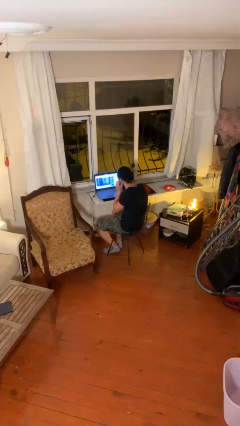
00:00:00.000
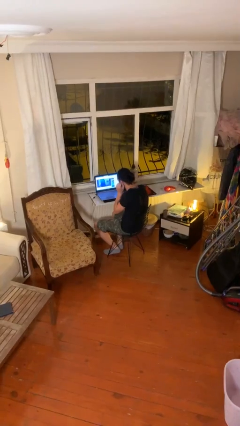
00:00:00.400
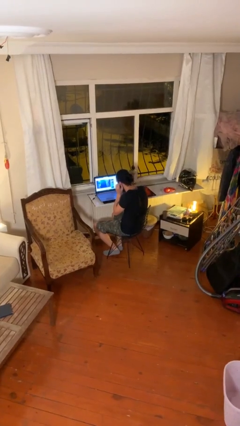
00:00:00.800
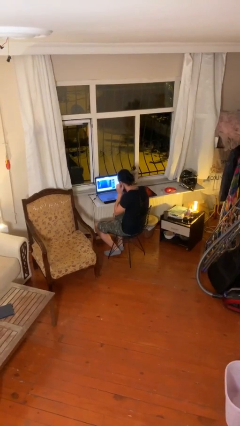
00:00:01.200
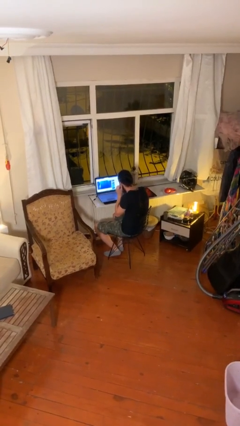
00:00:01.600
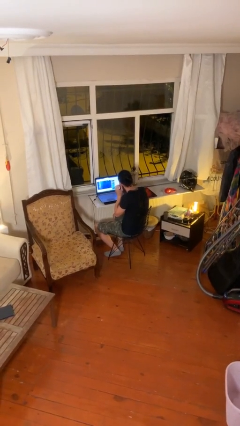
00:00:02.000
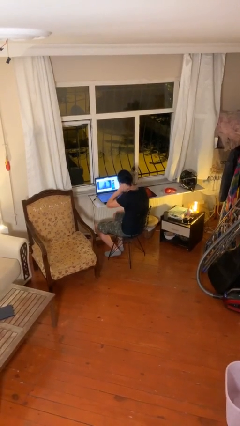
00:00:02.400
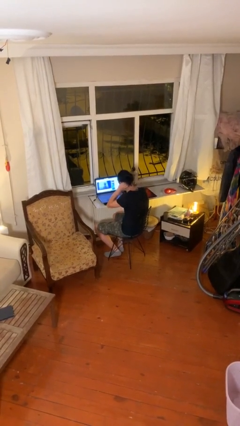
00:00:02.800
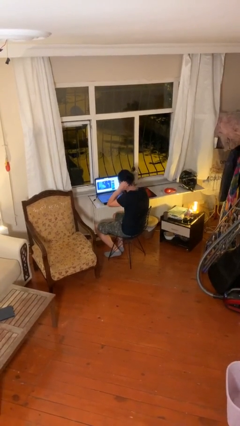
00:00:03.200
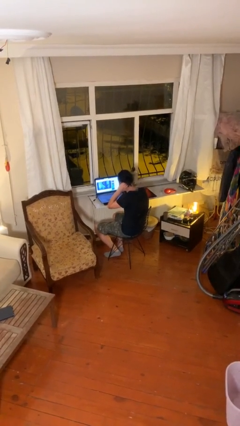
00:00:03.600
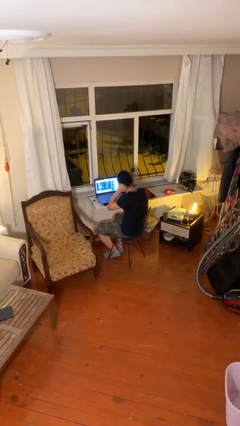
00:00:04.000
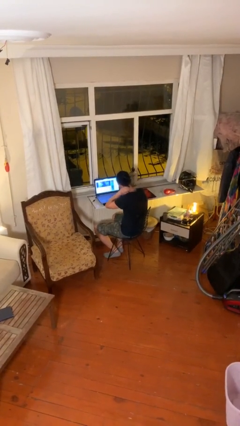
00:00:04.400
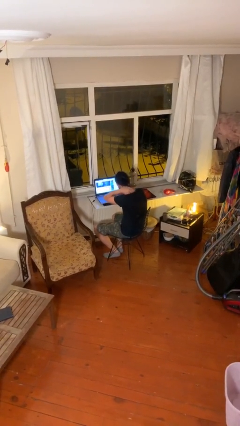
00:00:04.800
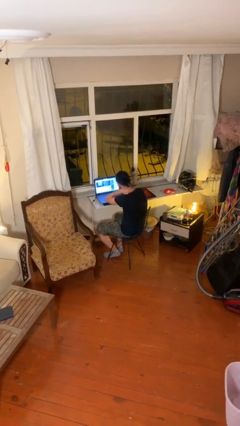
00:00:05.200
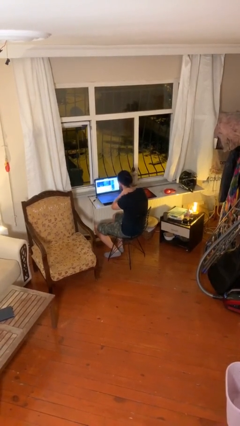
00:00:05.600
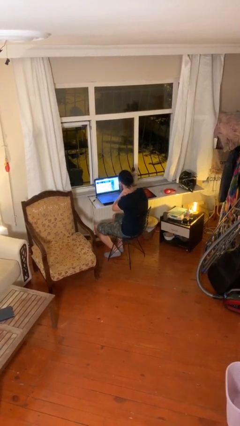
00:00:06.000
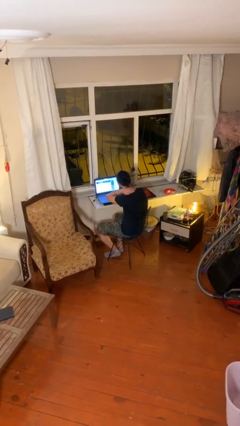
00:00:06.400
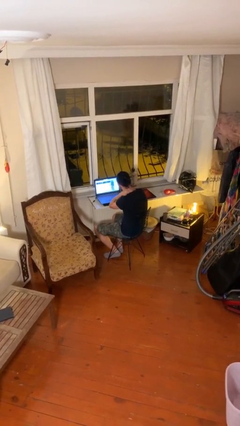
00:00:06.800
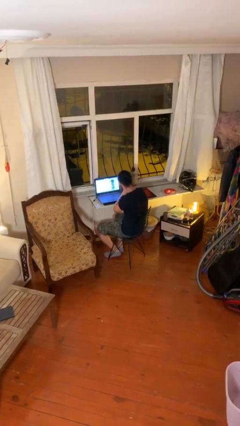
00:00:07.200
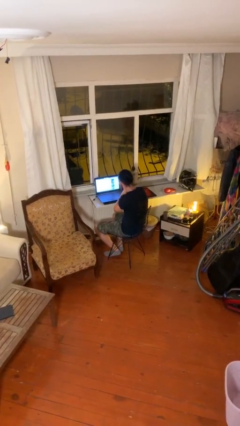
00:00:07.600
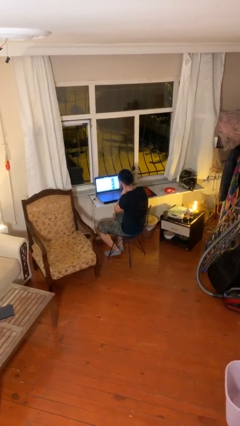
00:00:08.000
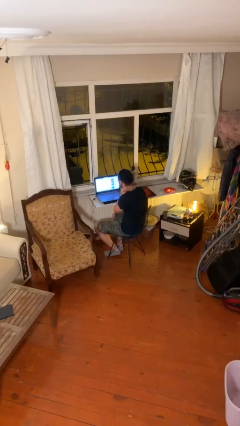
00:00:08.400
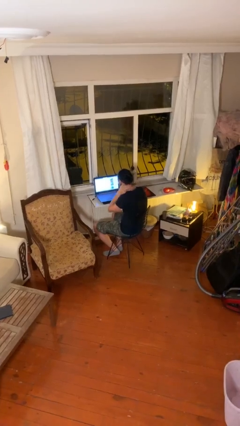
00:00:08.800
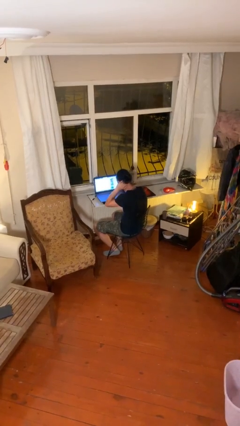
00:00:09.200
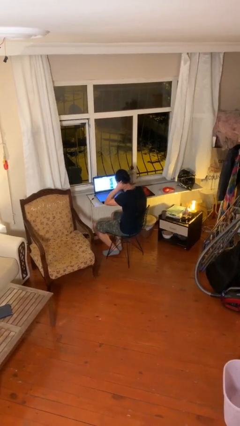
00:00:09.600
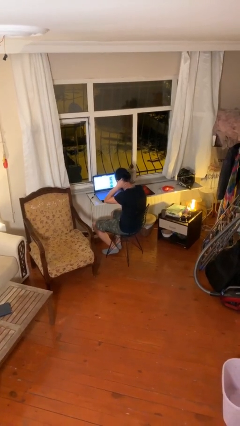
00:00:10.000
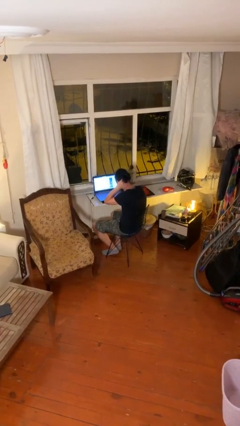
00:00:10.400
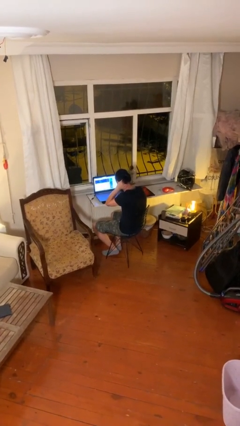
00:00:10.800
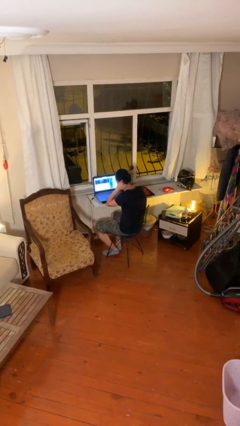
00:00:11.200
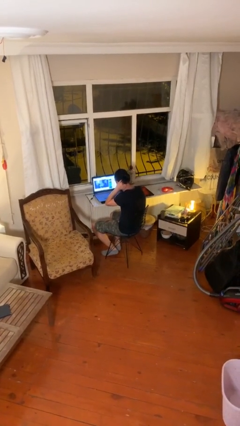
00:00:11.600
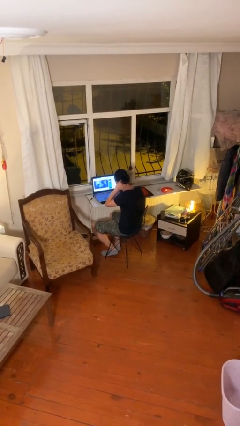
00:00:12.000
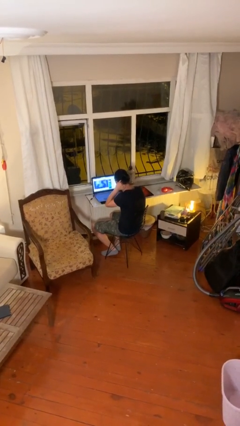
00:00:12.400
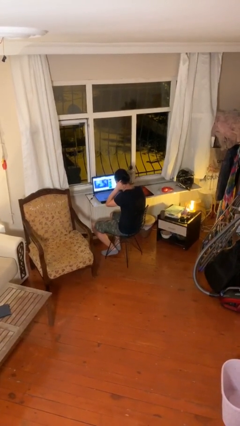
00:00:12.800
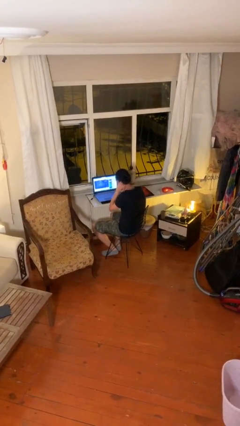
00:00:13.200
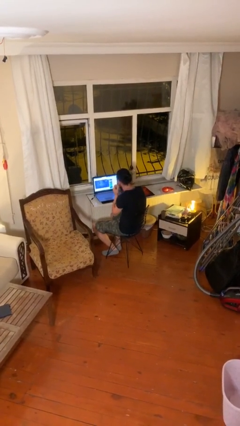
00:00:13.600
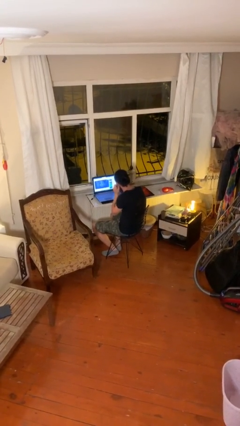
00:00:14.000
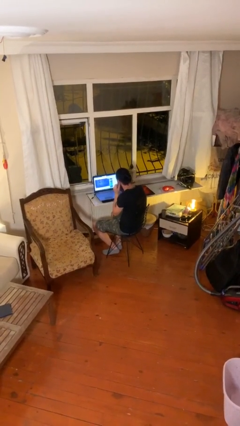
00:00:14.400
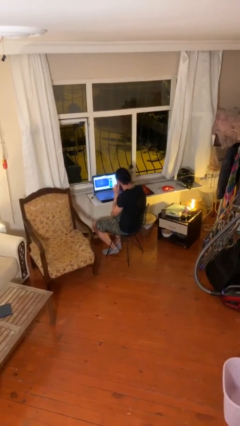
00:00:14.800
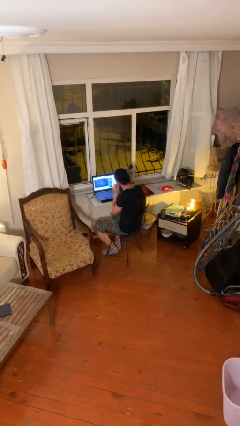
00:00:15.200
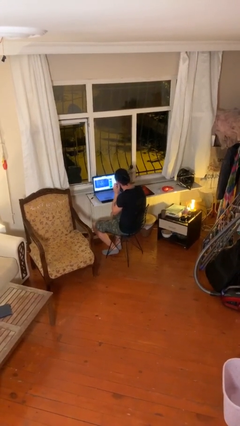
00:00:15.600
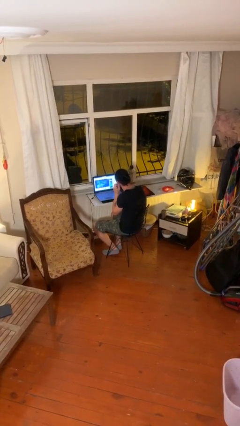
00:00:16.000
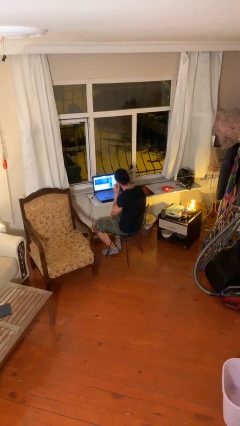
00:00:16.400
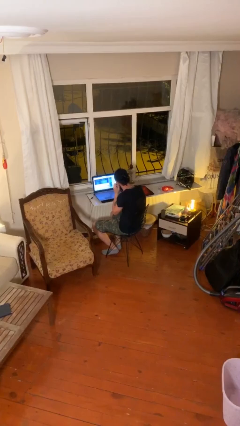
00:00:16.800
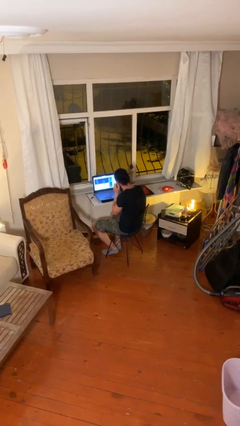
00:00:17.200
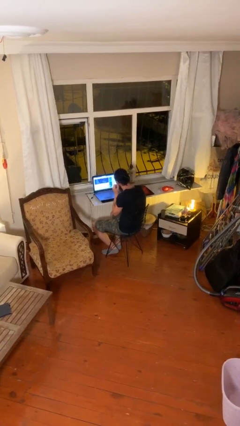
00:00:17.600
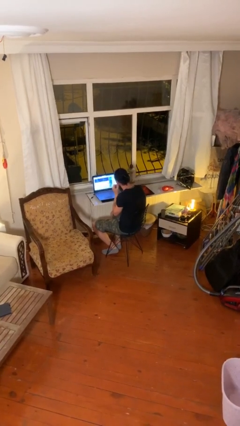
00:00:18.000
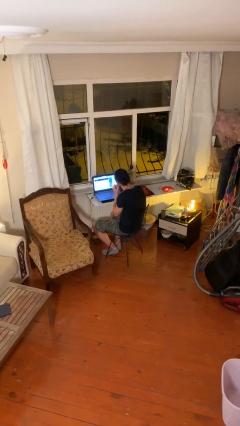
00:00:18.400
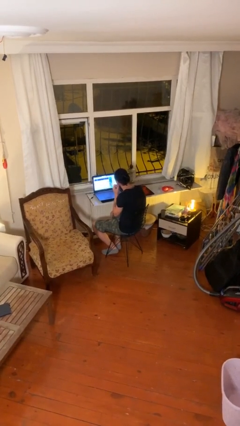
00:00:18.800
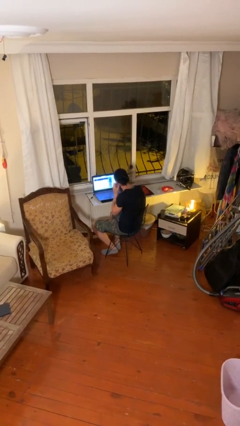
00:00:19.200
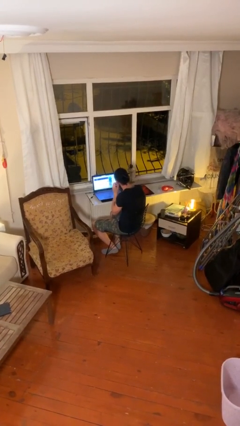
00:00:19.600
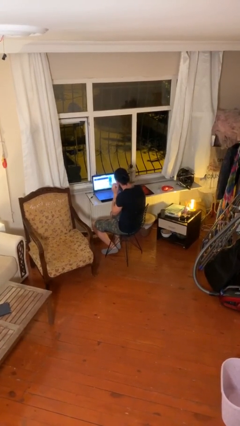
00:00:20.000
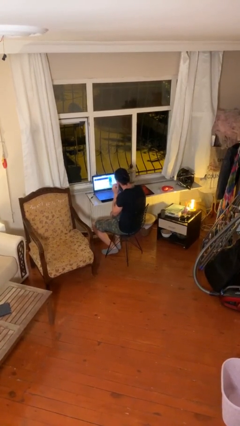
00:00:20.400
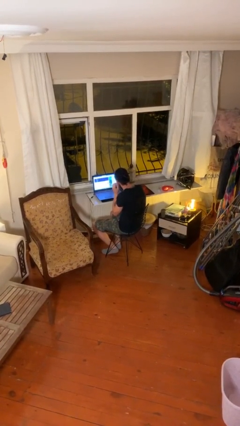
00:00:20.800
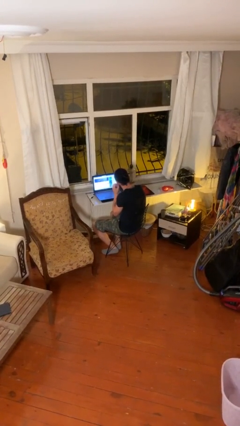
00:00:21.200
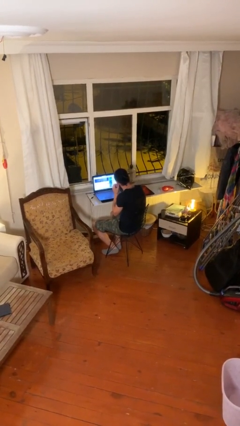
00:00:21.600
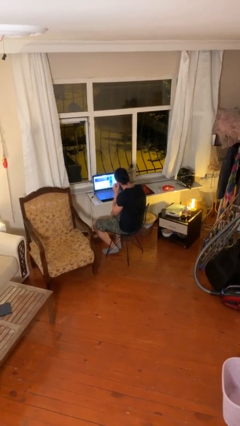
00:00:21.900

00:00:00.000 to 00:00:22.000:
person interacts with laptop

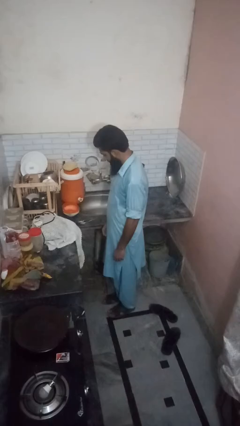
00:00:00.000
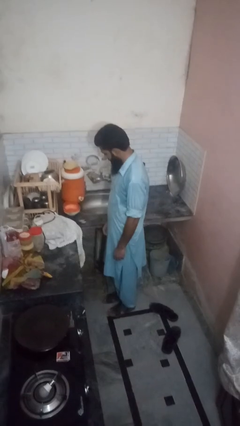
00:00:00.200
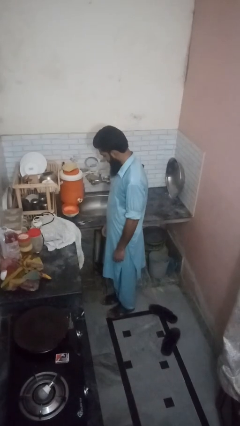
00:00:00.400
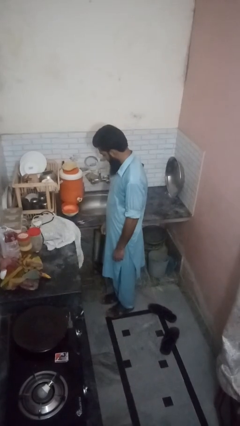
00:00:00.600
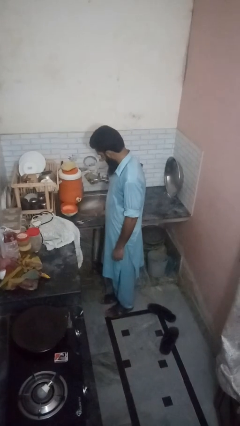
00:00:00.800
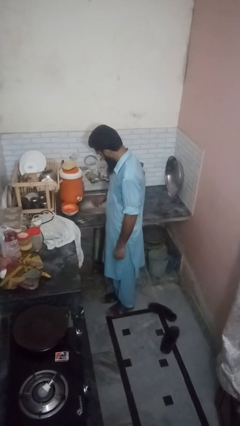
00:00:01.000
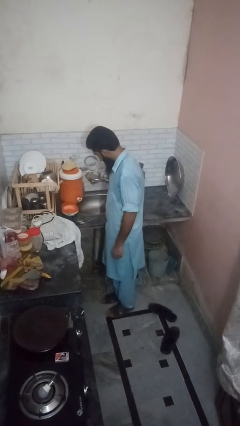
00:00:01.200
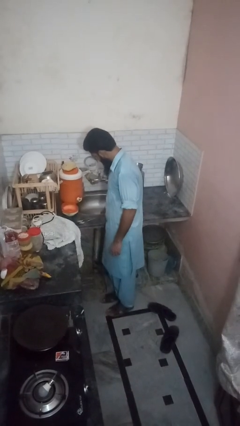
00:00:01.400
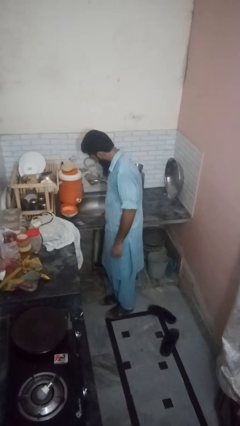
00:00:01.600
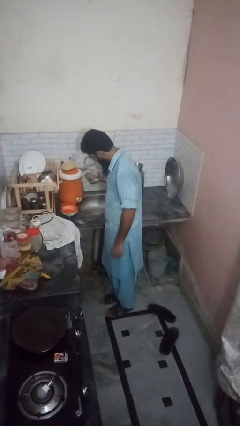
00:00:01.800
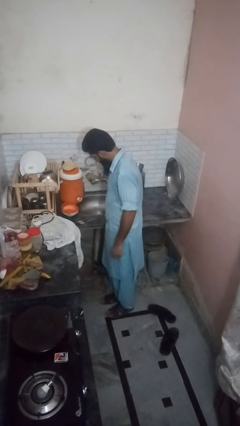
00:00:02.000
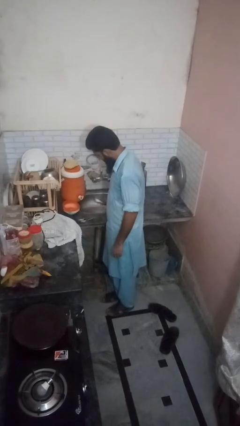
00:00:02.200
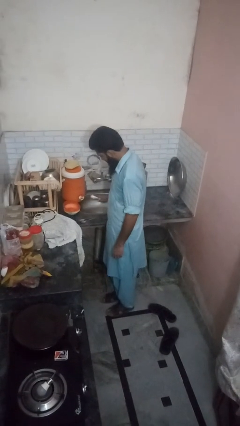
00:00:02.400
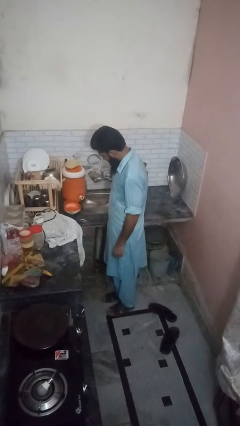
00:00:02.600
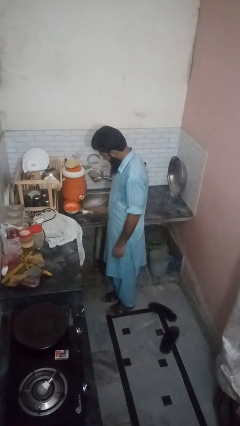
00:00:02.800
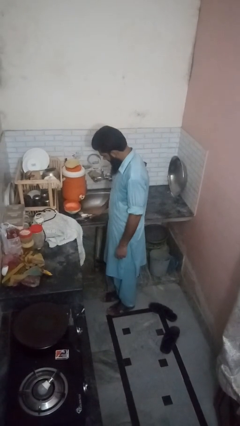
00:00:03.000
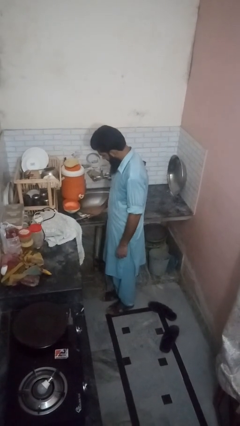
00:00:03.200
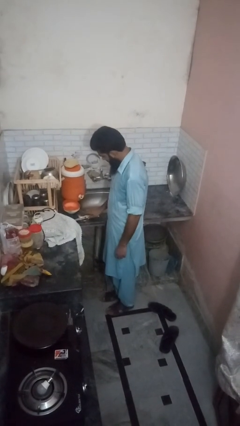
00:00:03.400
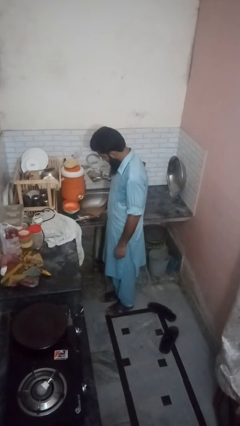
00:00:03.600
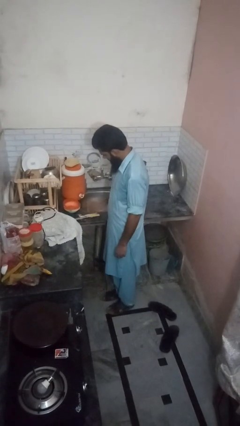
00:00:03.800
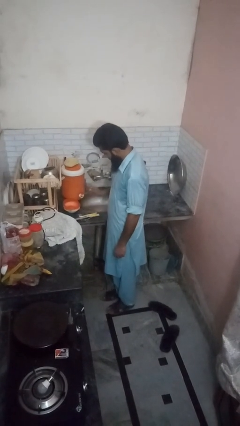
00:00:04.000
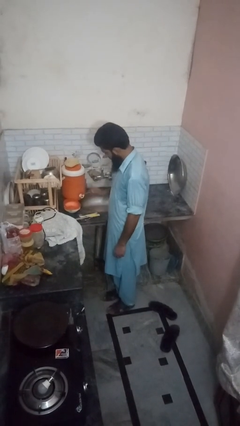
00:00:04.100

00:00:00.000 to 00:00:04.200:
person unloads dishwasher

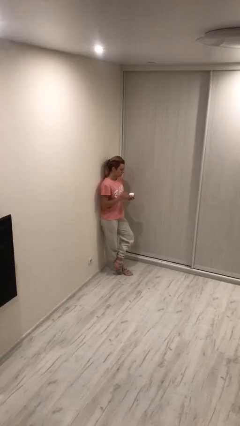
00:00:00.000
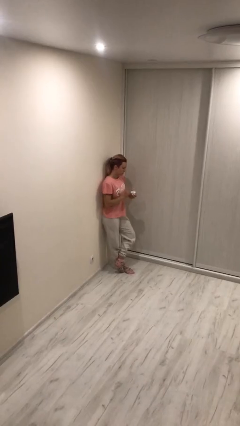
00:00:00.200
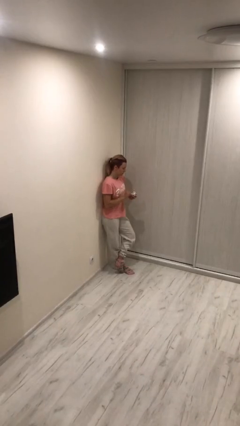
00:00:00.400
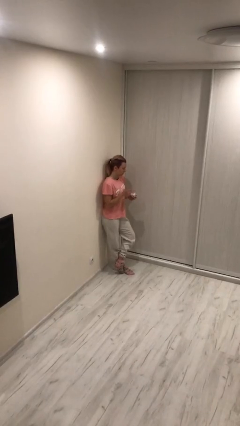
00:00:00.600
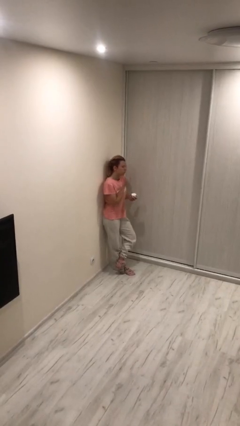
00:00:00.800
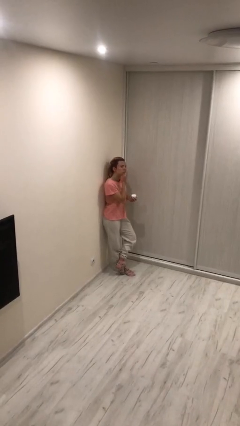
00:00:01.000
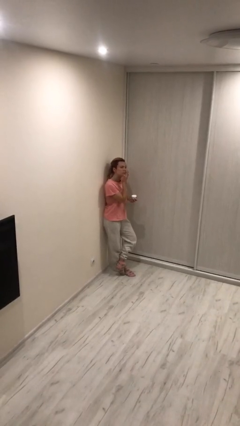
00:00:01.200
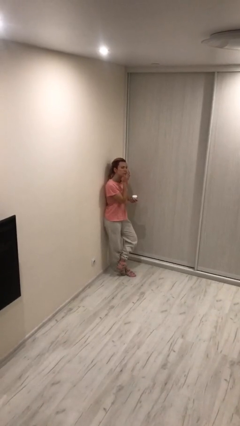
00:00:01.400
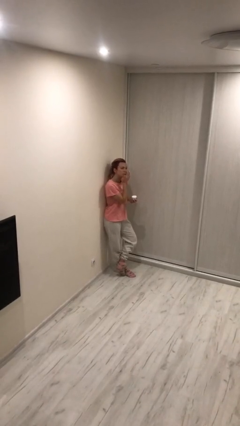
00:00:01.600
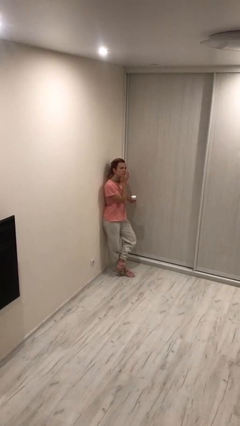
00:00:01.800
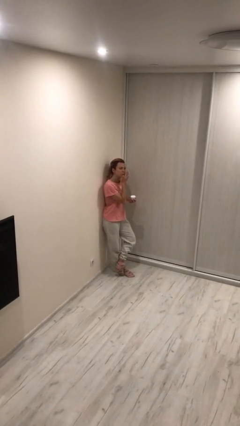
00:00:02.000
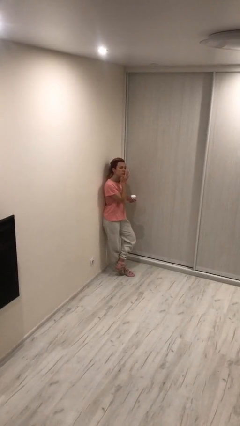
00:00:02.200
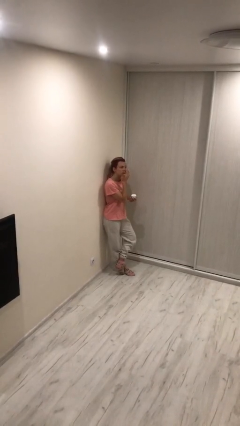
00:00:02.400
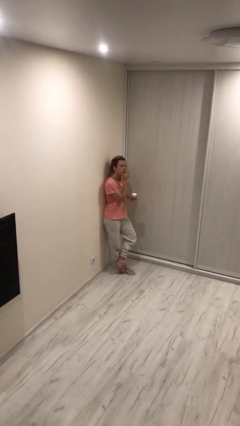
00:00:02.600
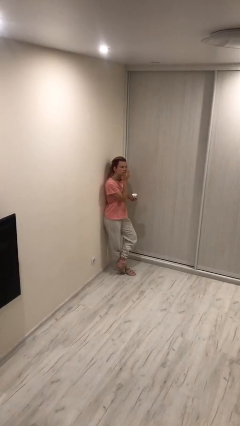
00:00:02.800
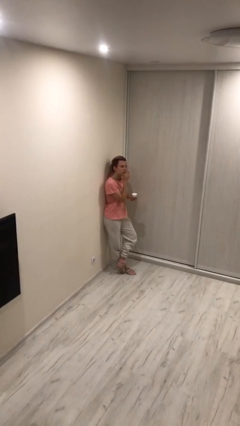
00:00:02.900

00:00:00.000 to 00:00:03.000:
person applies facial moisturizer
